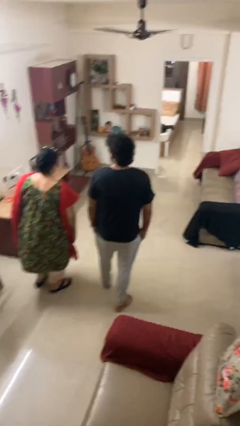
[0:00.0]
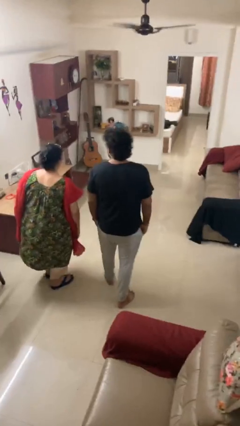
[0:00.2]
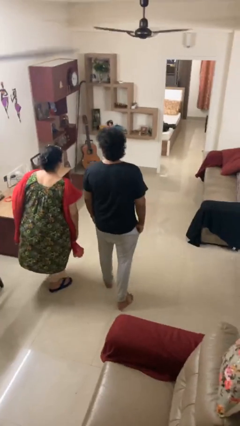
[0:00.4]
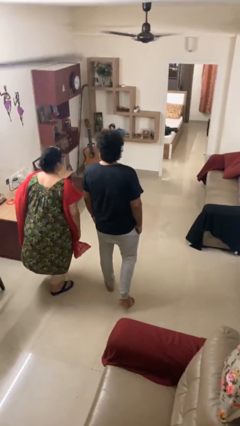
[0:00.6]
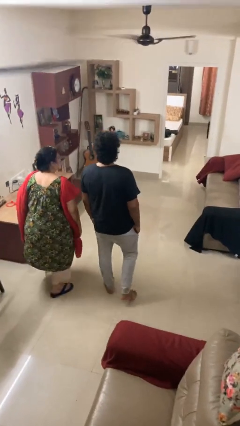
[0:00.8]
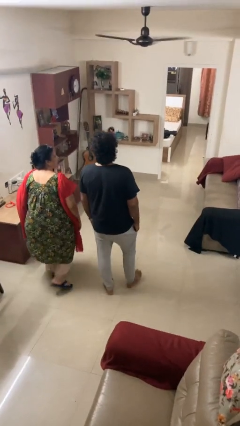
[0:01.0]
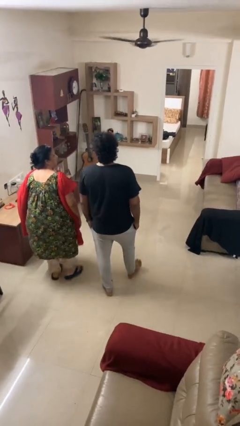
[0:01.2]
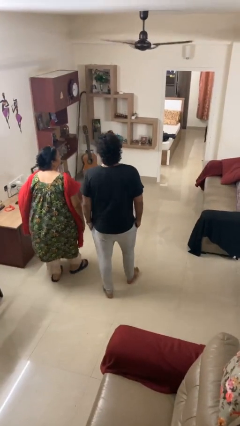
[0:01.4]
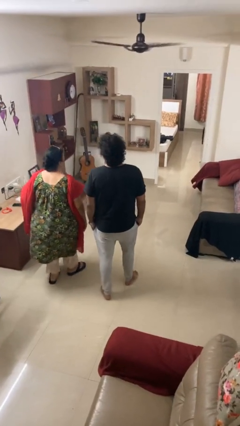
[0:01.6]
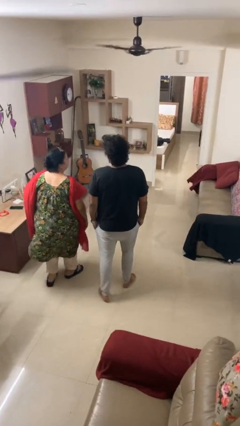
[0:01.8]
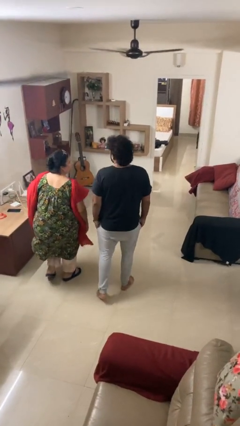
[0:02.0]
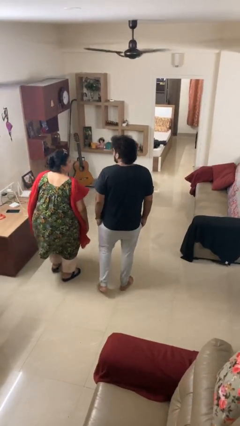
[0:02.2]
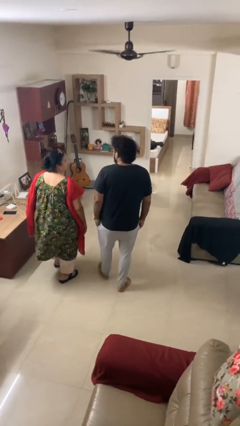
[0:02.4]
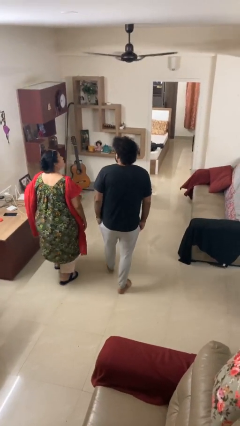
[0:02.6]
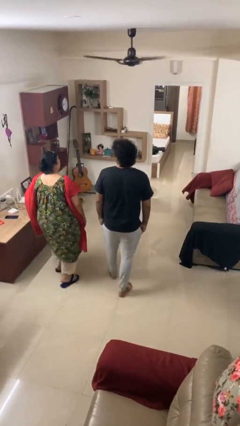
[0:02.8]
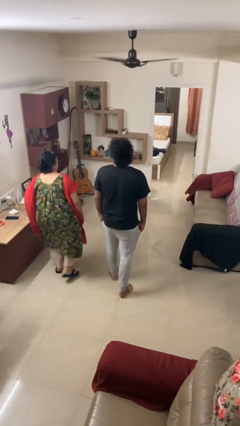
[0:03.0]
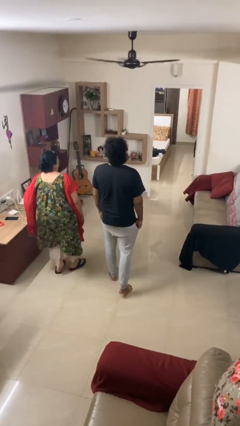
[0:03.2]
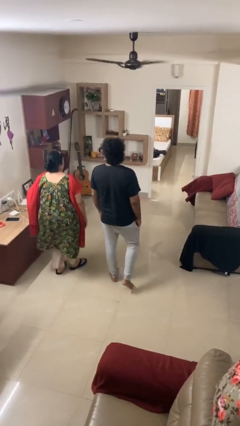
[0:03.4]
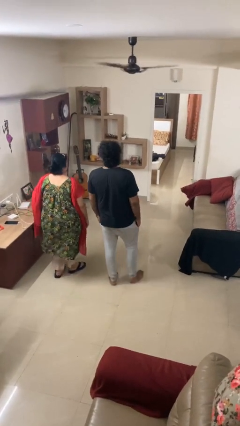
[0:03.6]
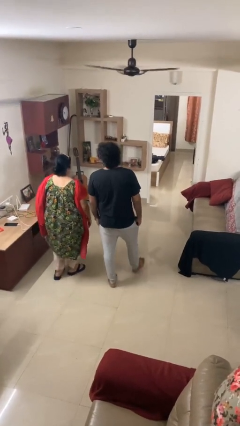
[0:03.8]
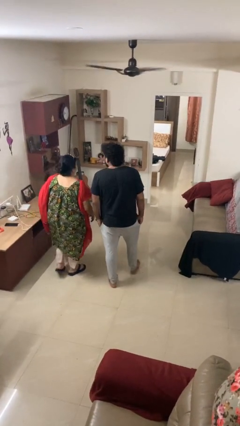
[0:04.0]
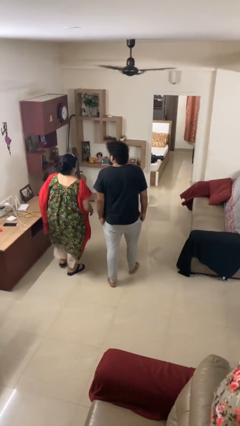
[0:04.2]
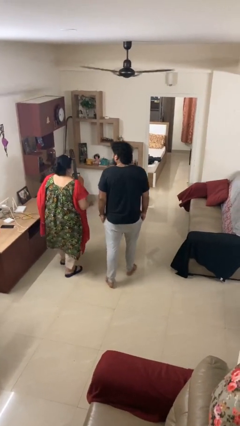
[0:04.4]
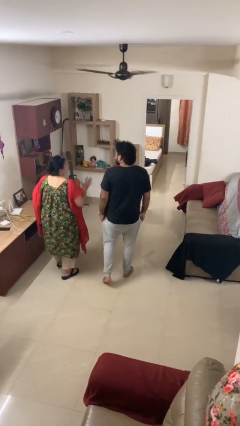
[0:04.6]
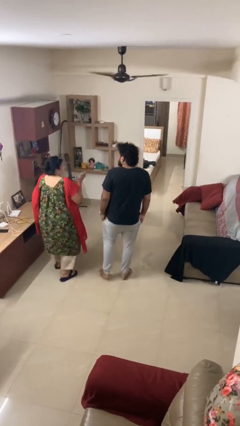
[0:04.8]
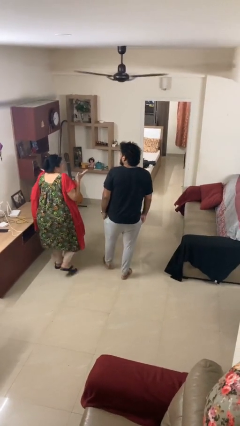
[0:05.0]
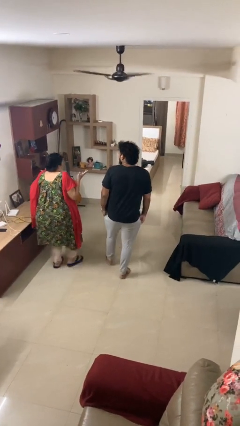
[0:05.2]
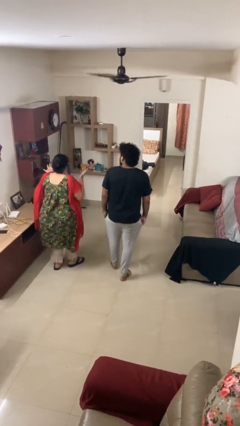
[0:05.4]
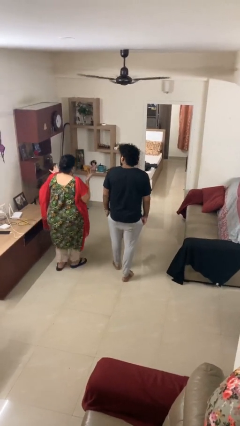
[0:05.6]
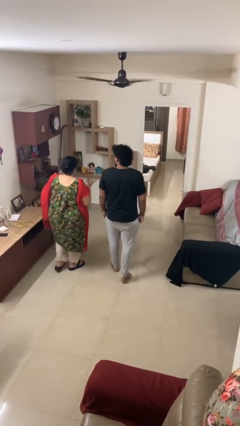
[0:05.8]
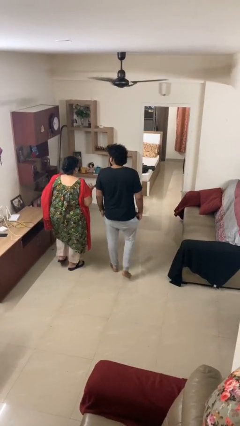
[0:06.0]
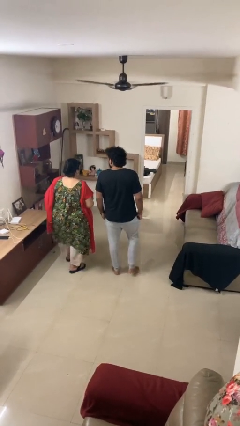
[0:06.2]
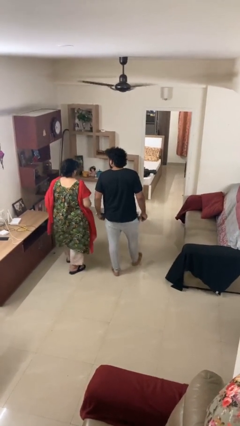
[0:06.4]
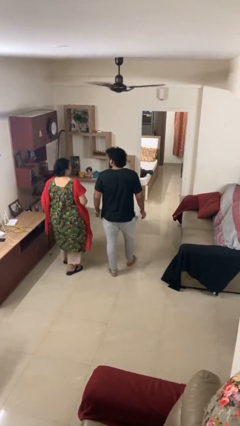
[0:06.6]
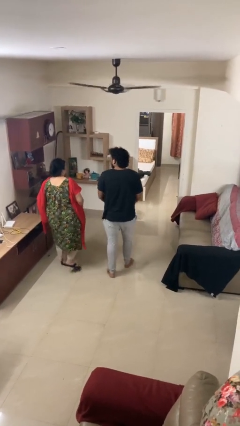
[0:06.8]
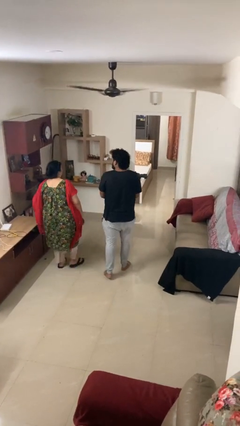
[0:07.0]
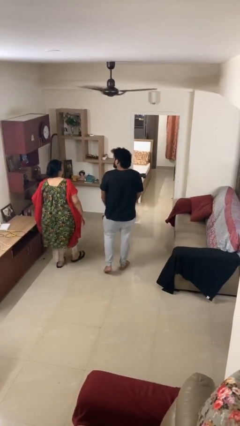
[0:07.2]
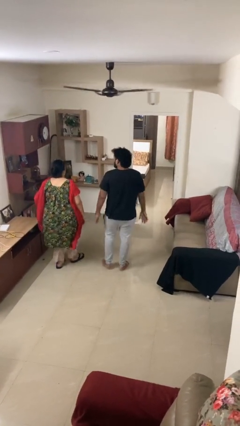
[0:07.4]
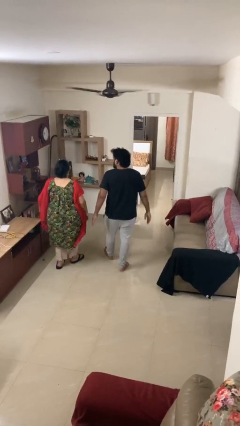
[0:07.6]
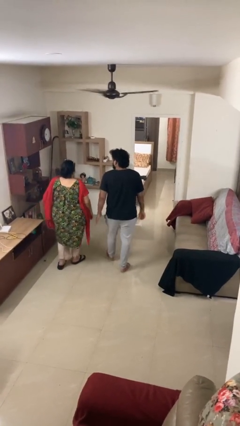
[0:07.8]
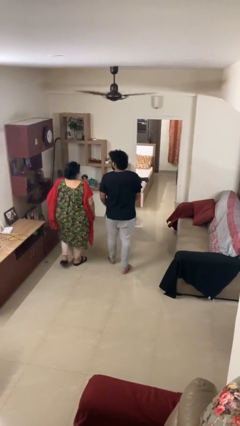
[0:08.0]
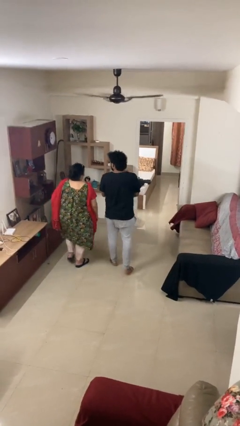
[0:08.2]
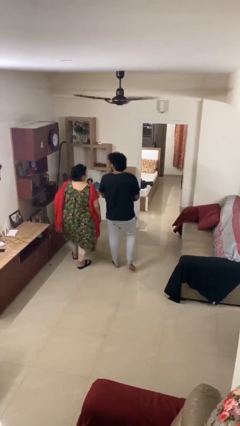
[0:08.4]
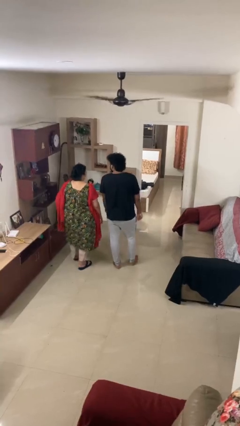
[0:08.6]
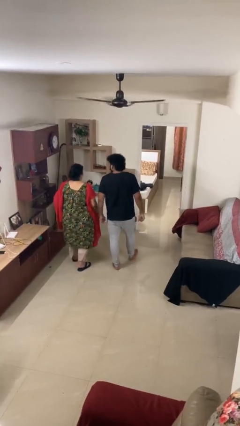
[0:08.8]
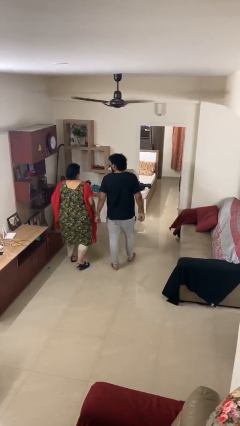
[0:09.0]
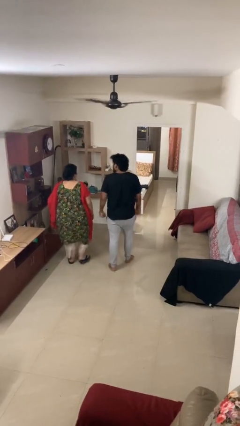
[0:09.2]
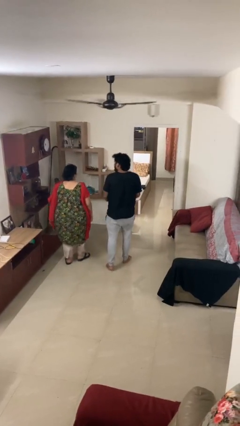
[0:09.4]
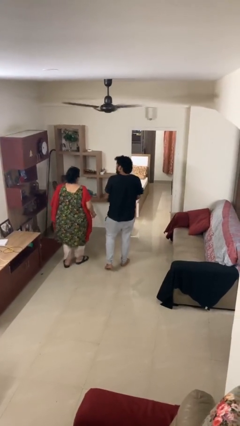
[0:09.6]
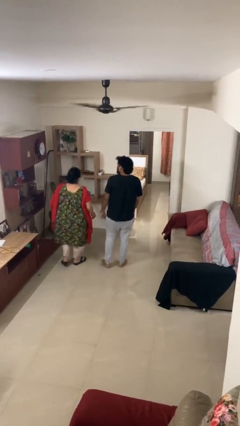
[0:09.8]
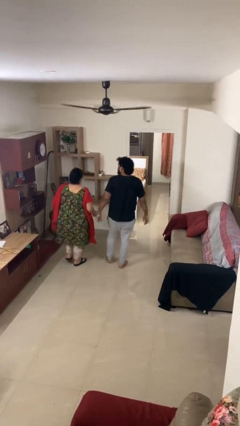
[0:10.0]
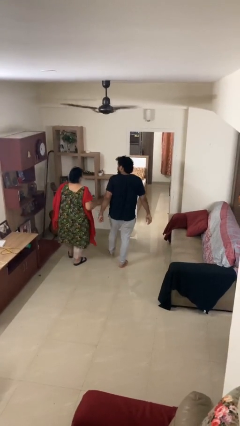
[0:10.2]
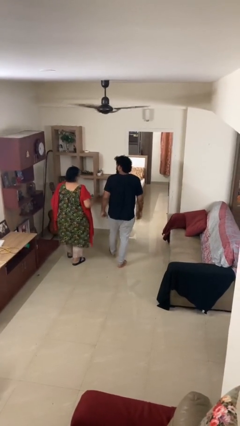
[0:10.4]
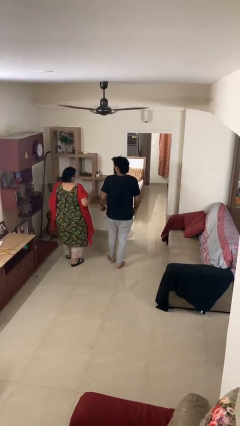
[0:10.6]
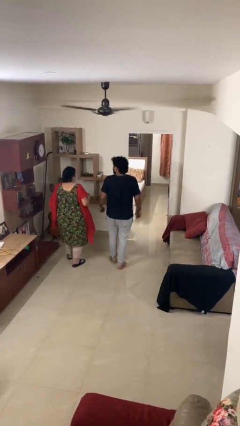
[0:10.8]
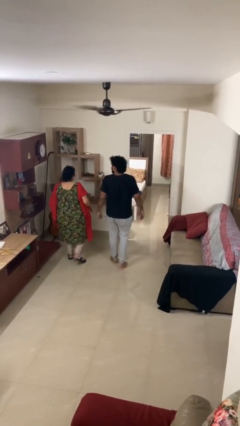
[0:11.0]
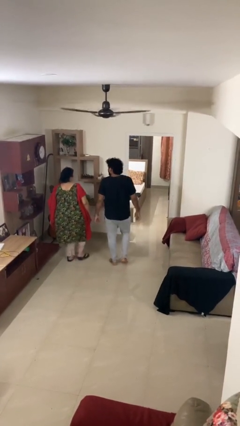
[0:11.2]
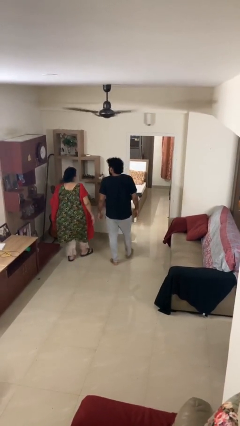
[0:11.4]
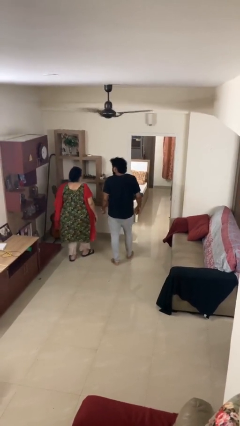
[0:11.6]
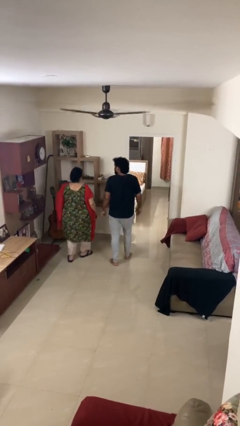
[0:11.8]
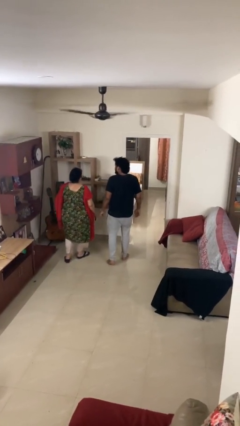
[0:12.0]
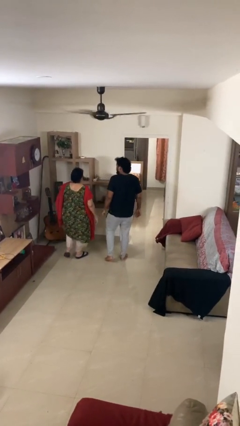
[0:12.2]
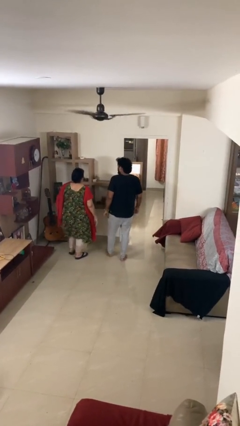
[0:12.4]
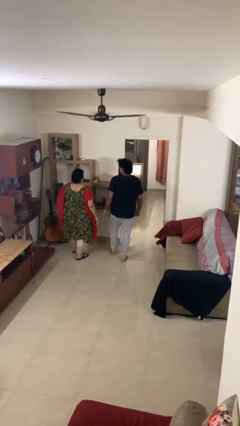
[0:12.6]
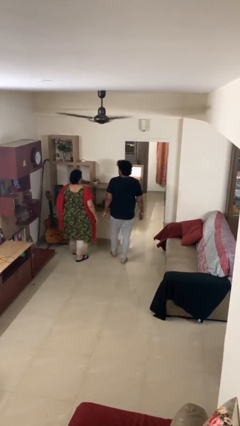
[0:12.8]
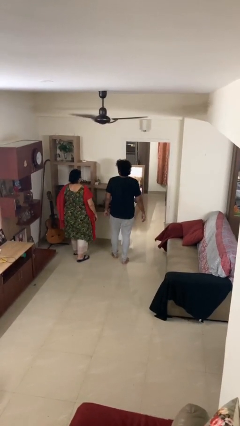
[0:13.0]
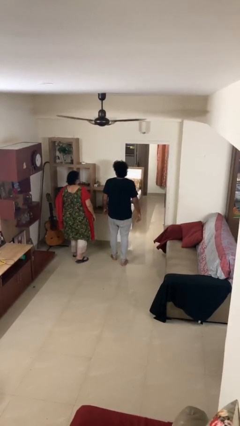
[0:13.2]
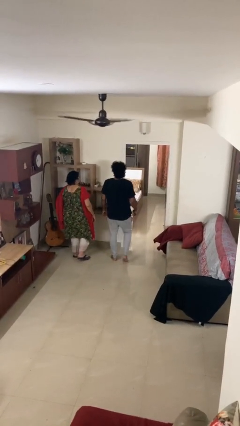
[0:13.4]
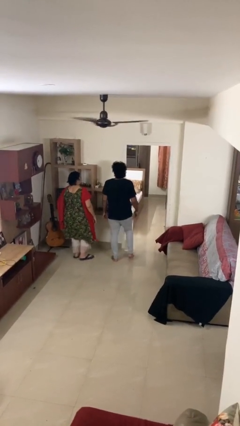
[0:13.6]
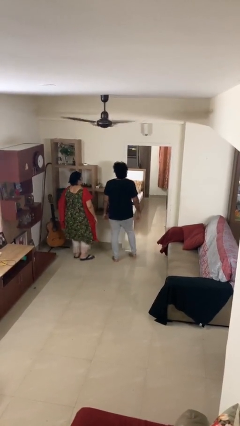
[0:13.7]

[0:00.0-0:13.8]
person talks to person

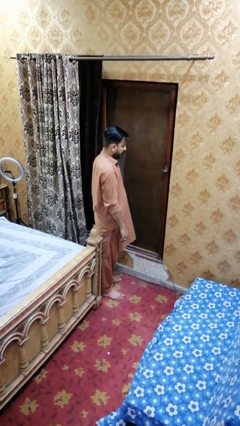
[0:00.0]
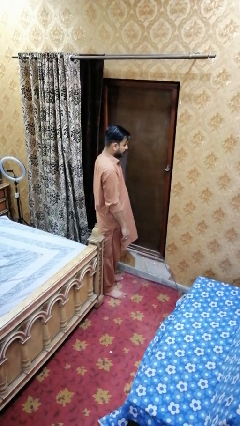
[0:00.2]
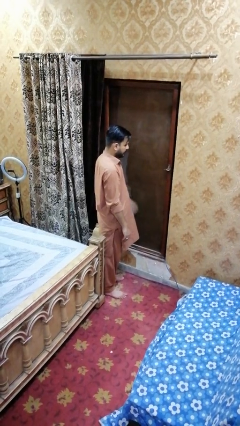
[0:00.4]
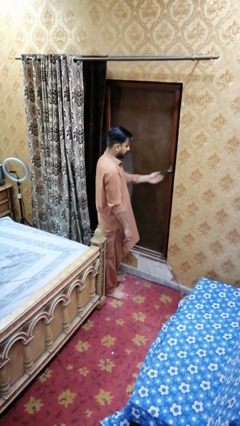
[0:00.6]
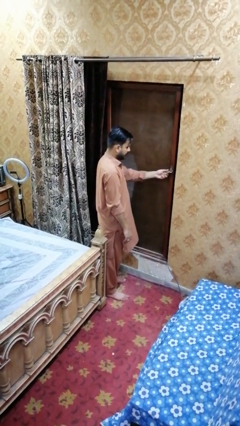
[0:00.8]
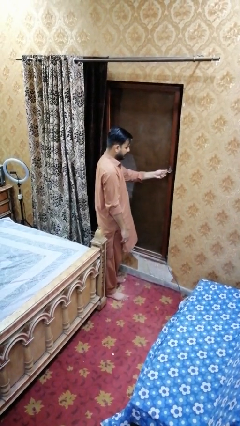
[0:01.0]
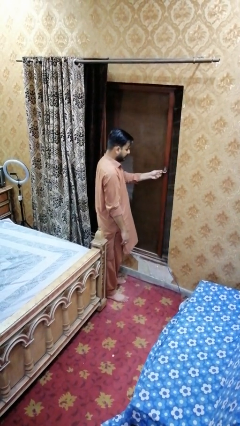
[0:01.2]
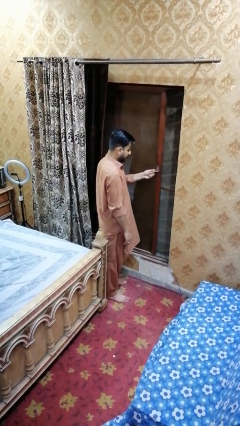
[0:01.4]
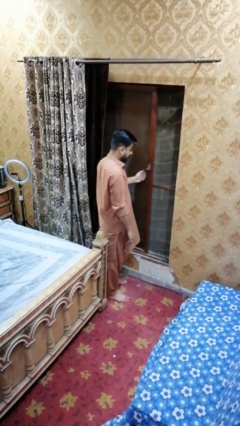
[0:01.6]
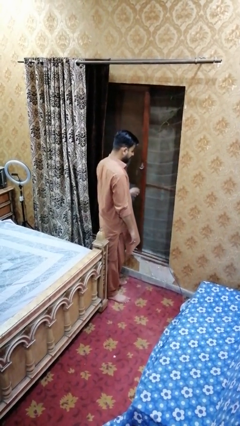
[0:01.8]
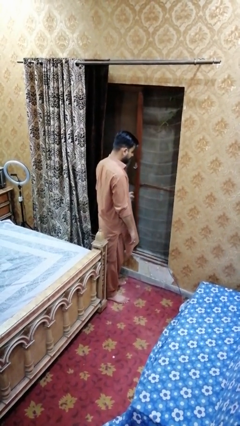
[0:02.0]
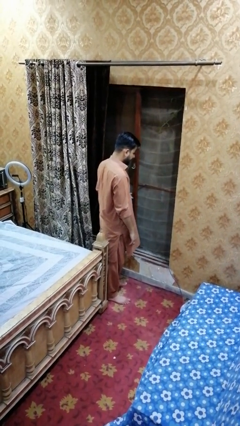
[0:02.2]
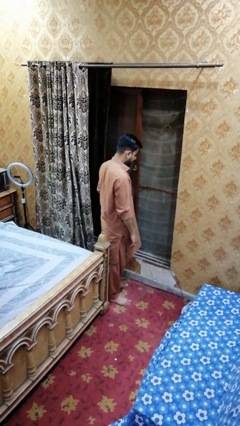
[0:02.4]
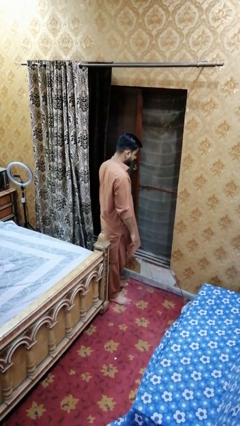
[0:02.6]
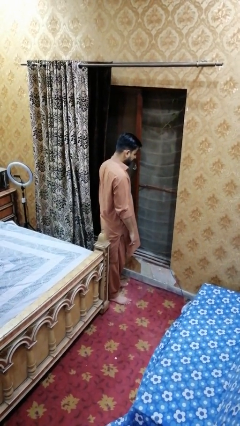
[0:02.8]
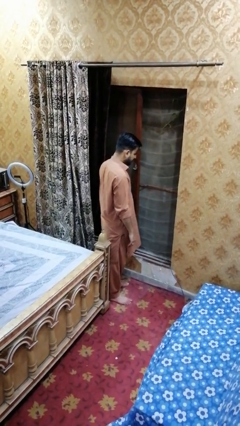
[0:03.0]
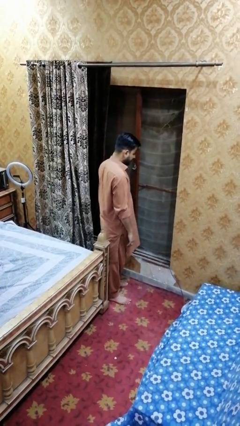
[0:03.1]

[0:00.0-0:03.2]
person opens home window

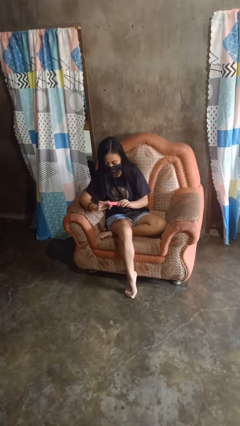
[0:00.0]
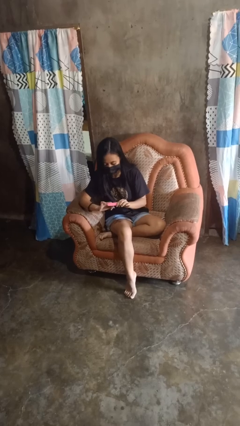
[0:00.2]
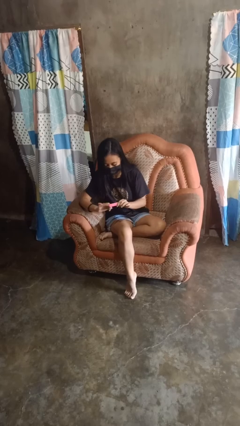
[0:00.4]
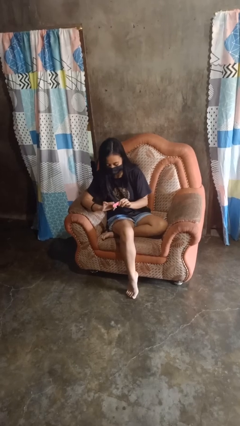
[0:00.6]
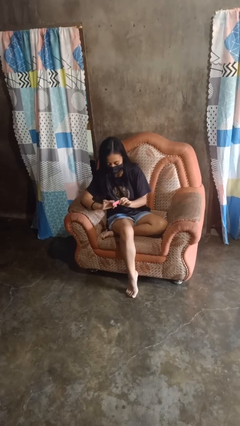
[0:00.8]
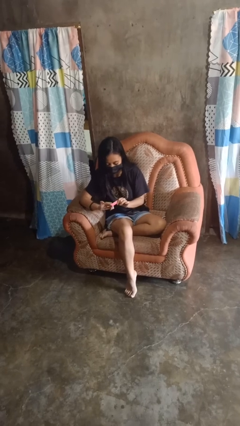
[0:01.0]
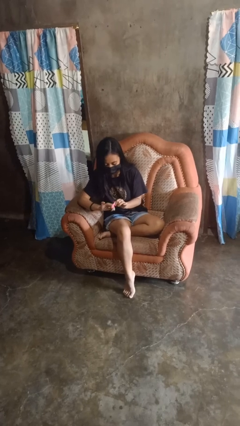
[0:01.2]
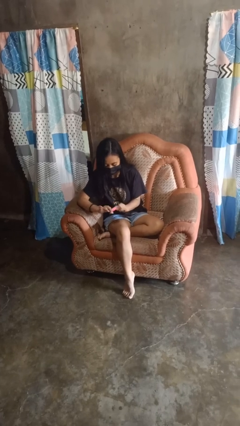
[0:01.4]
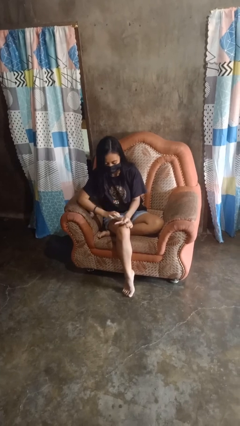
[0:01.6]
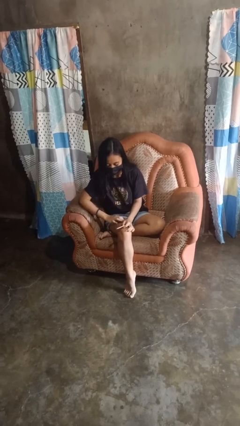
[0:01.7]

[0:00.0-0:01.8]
person files fingernails
